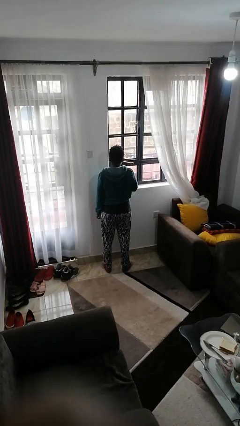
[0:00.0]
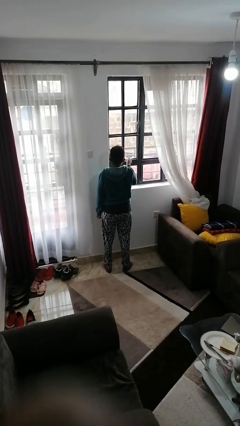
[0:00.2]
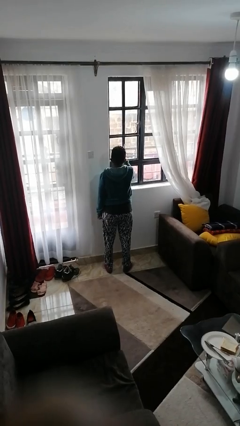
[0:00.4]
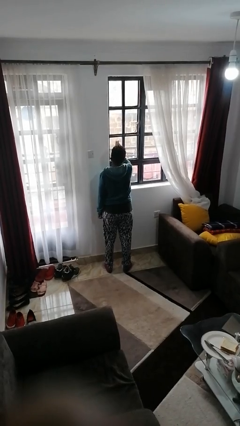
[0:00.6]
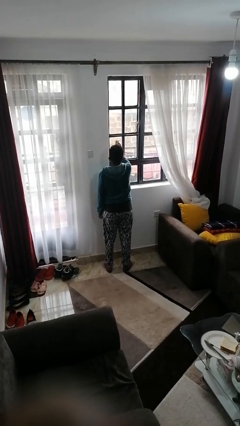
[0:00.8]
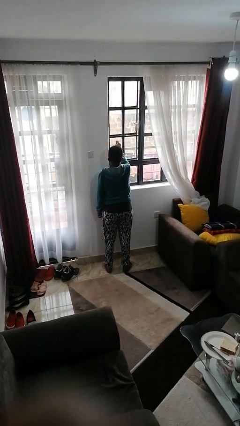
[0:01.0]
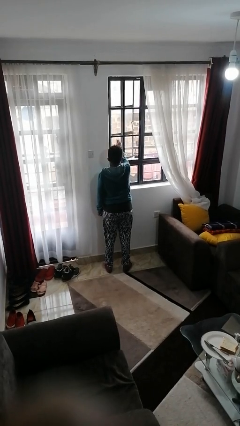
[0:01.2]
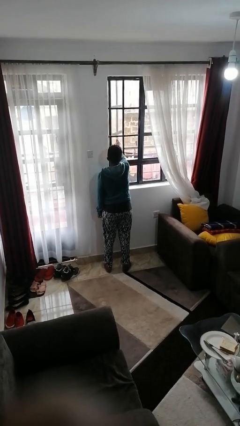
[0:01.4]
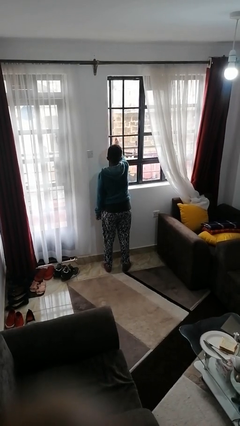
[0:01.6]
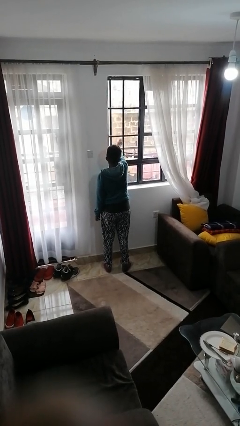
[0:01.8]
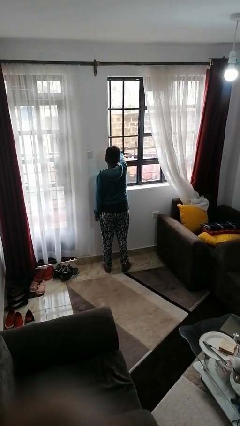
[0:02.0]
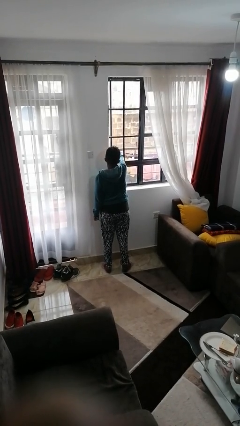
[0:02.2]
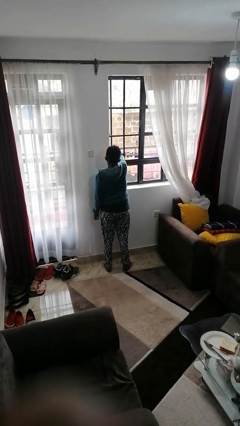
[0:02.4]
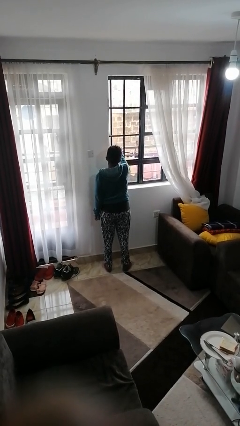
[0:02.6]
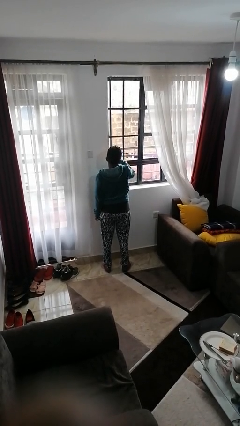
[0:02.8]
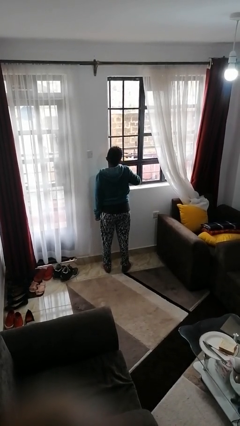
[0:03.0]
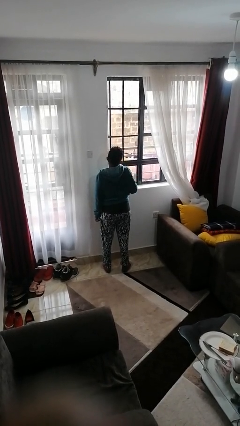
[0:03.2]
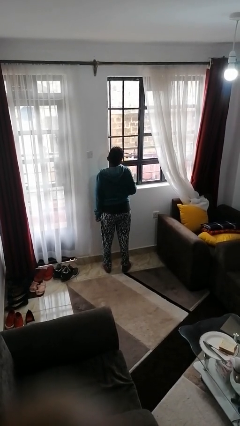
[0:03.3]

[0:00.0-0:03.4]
person opens home window

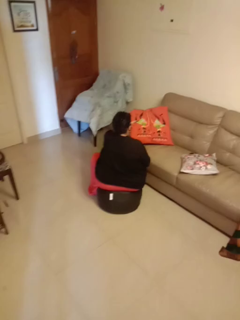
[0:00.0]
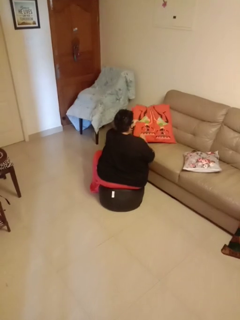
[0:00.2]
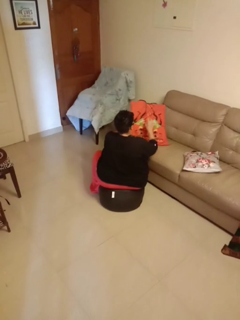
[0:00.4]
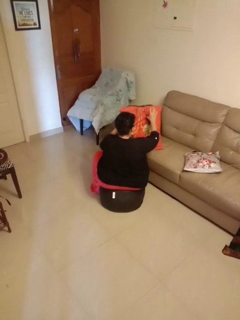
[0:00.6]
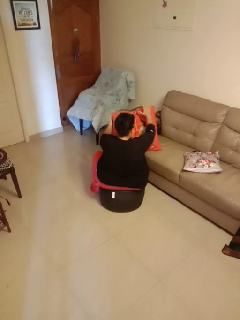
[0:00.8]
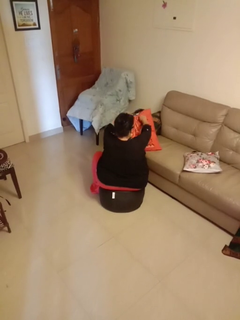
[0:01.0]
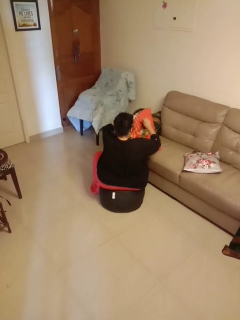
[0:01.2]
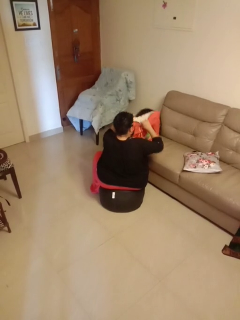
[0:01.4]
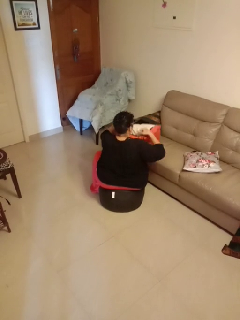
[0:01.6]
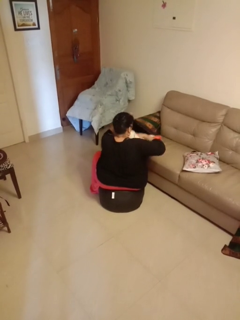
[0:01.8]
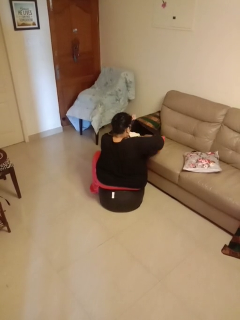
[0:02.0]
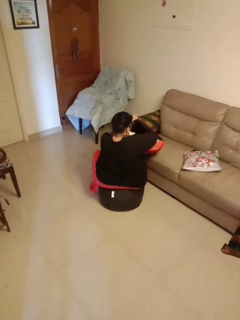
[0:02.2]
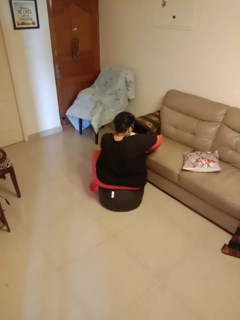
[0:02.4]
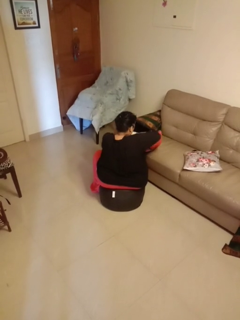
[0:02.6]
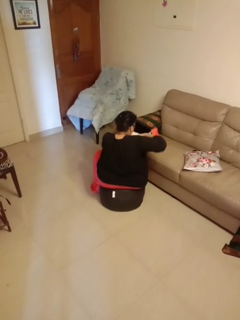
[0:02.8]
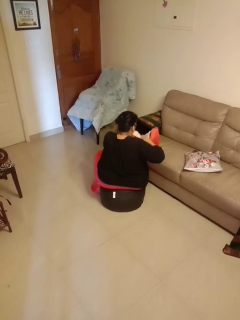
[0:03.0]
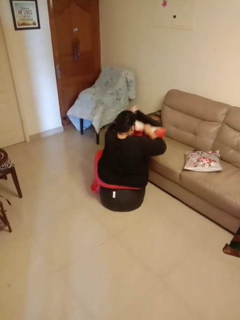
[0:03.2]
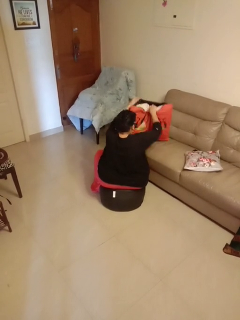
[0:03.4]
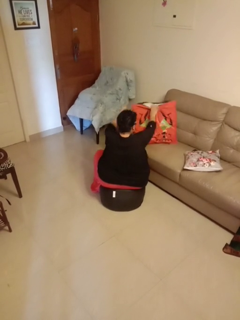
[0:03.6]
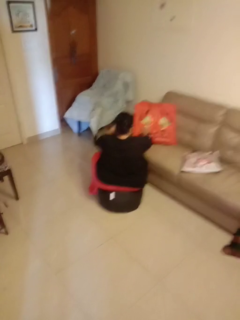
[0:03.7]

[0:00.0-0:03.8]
person searches in couch

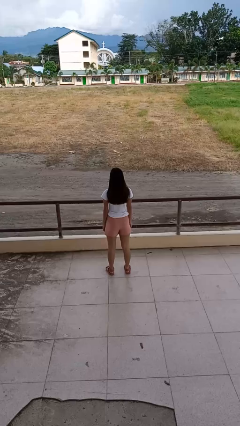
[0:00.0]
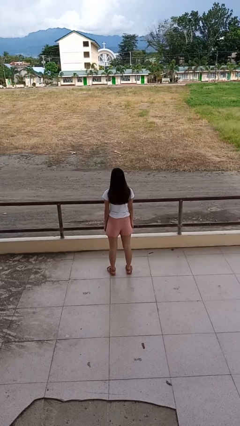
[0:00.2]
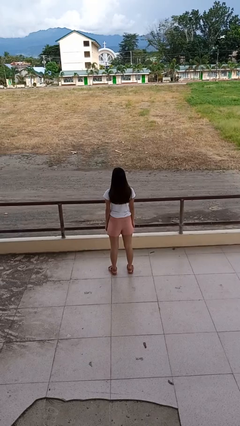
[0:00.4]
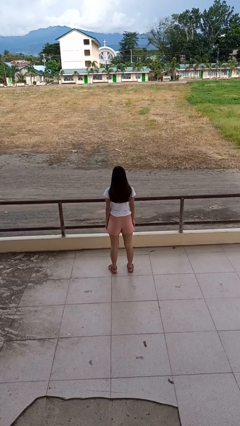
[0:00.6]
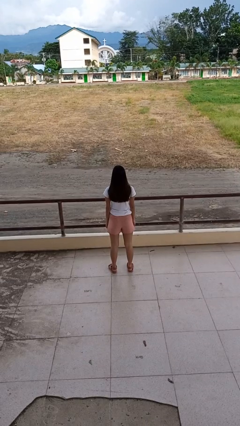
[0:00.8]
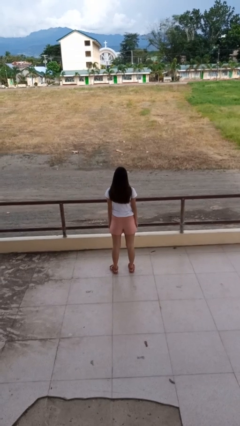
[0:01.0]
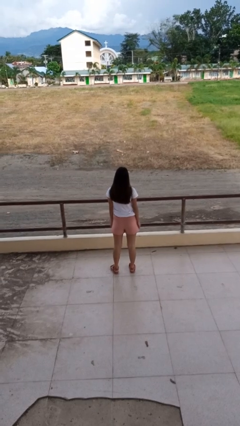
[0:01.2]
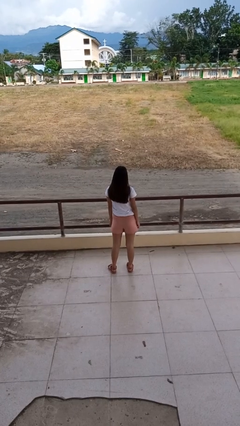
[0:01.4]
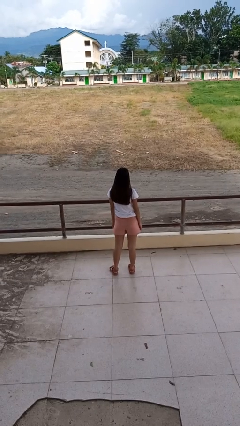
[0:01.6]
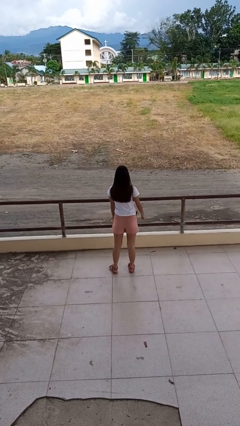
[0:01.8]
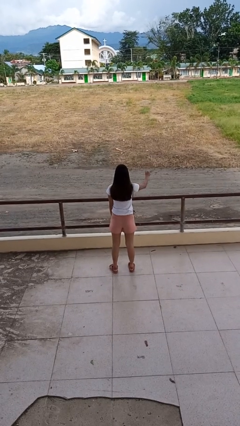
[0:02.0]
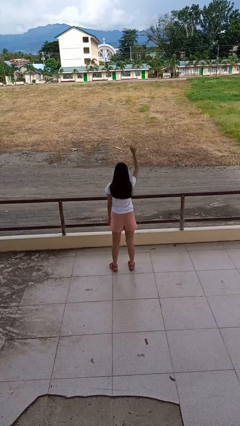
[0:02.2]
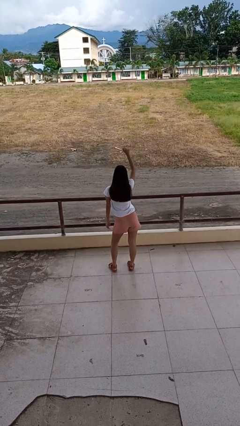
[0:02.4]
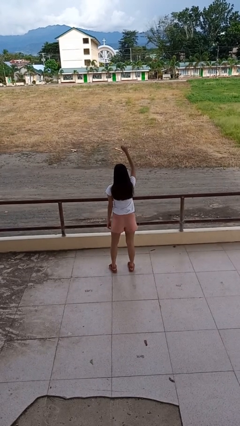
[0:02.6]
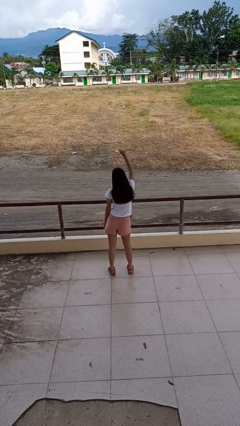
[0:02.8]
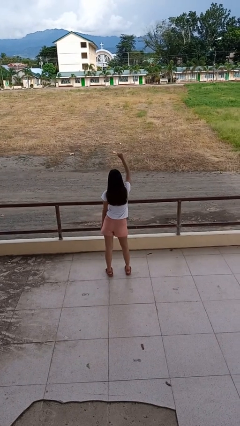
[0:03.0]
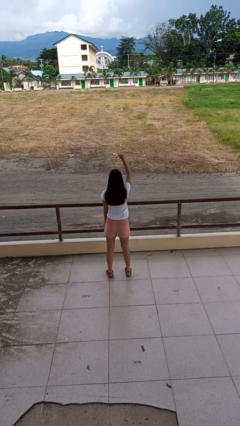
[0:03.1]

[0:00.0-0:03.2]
person dances in place

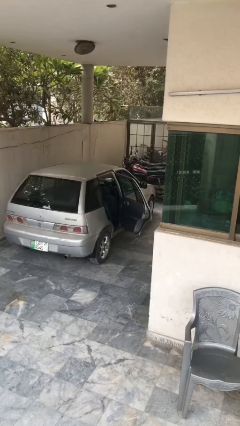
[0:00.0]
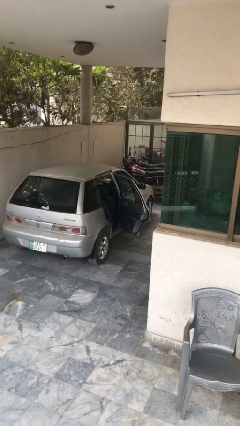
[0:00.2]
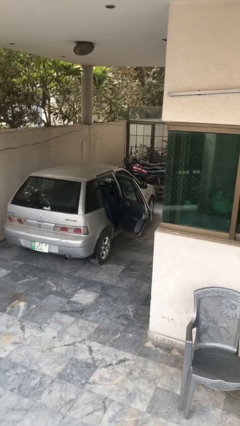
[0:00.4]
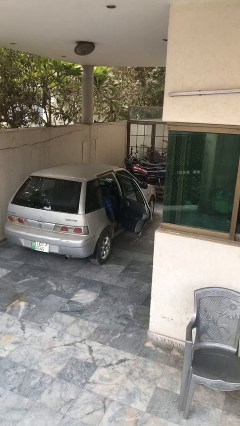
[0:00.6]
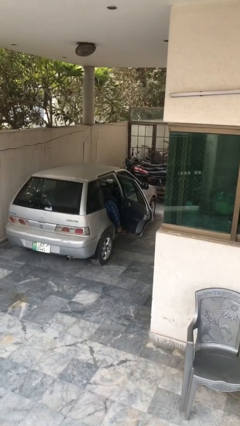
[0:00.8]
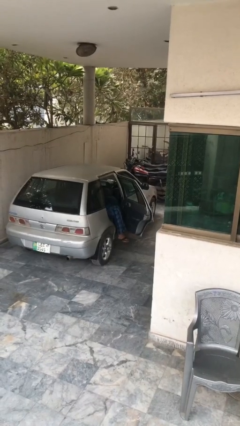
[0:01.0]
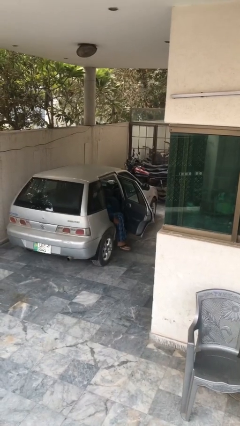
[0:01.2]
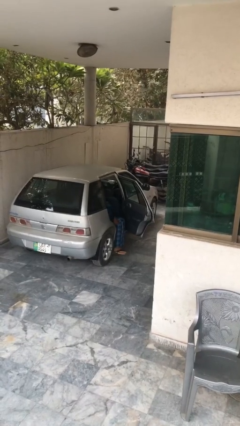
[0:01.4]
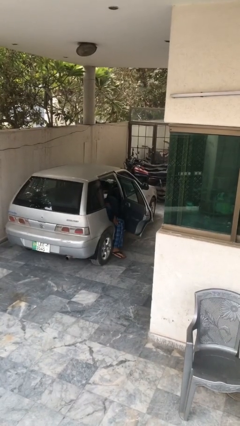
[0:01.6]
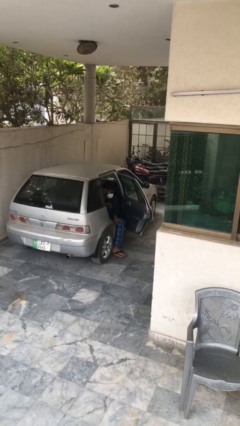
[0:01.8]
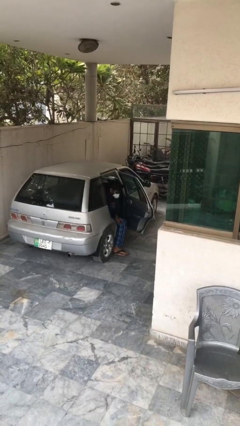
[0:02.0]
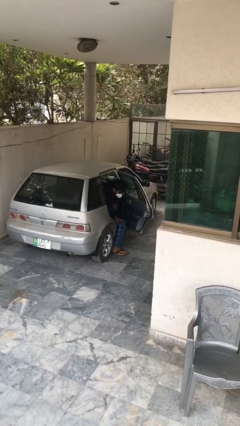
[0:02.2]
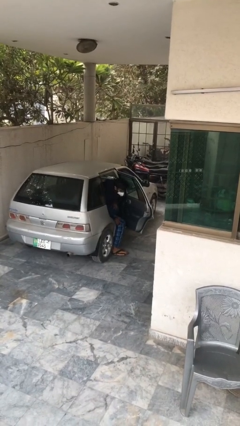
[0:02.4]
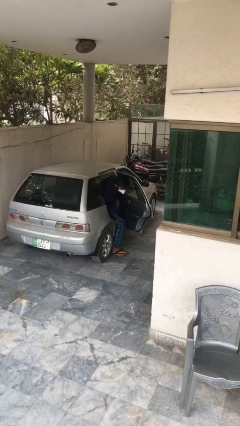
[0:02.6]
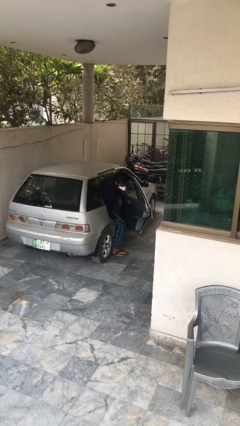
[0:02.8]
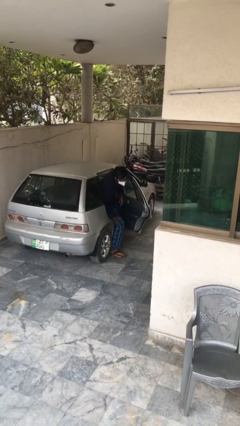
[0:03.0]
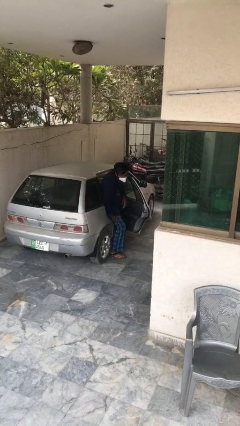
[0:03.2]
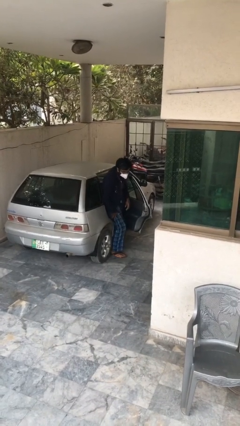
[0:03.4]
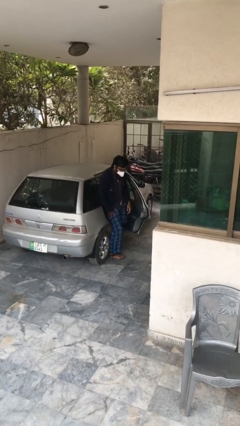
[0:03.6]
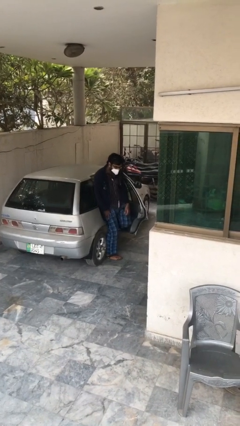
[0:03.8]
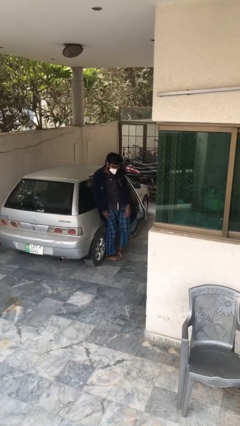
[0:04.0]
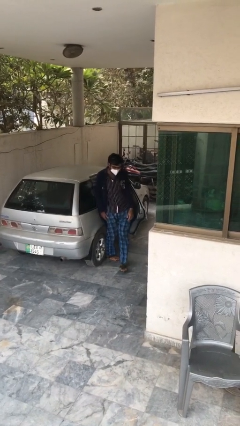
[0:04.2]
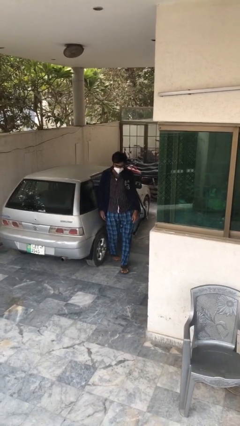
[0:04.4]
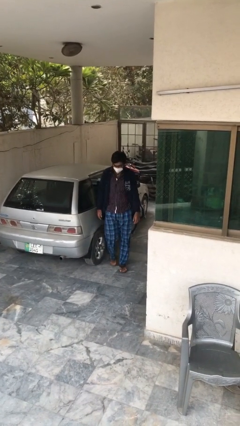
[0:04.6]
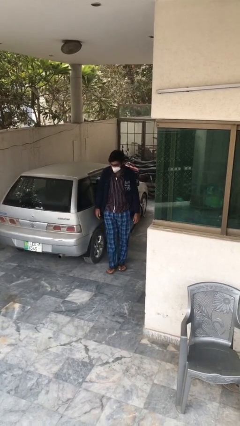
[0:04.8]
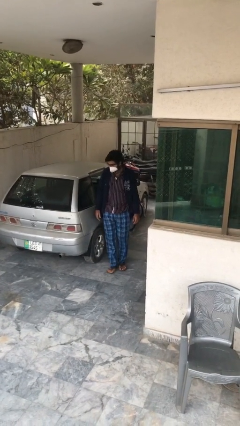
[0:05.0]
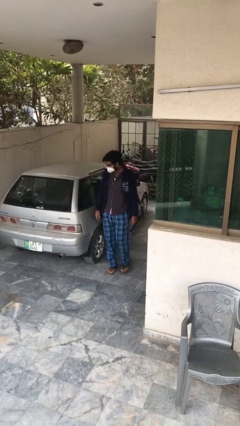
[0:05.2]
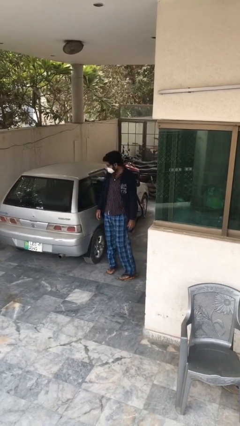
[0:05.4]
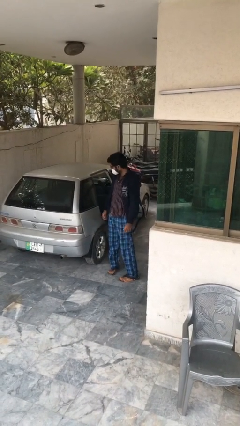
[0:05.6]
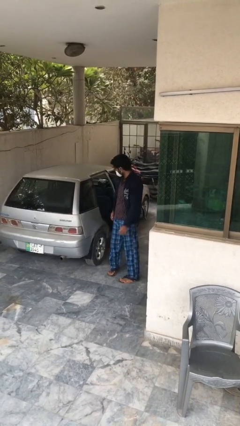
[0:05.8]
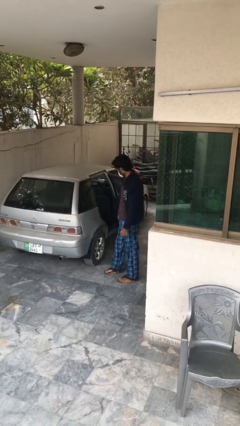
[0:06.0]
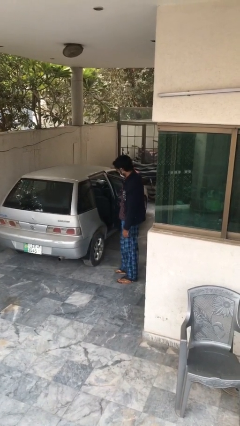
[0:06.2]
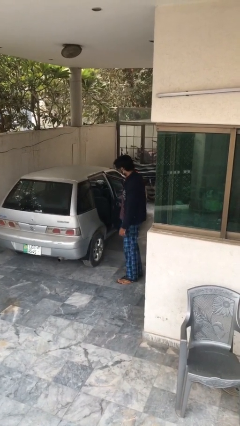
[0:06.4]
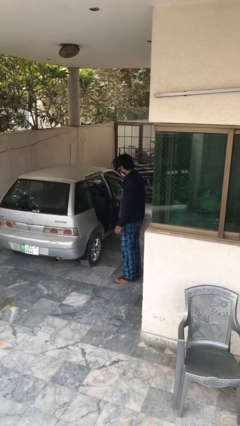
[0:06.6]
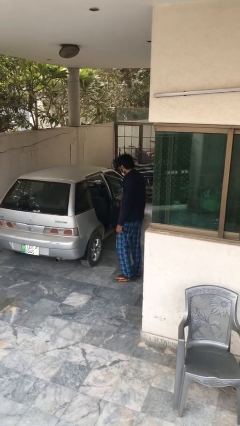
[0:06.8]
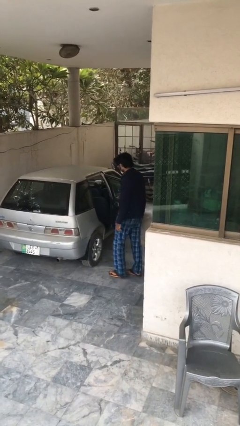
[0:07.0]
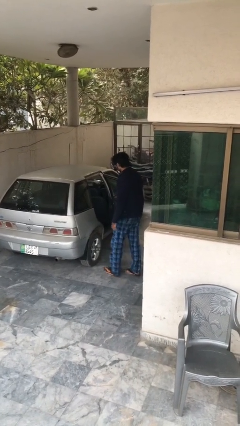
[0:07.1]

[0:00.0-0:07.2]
person exits car

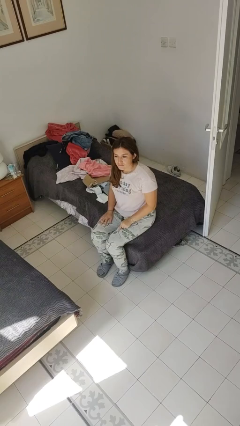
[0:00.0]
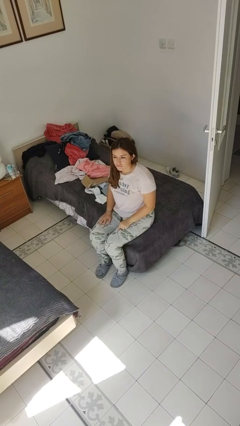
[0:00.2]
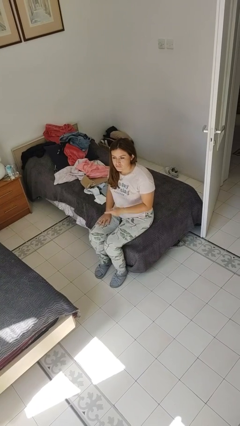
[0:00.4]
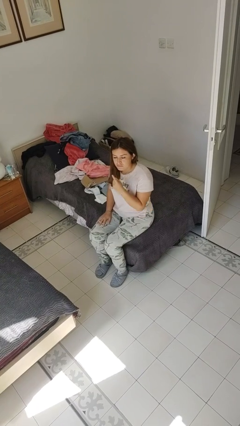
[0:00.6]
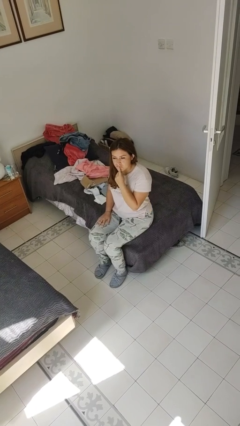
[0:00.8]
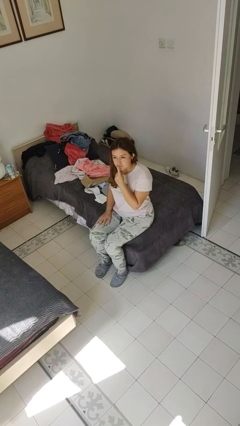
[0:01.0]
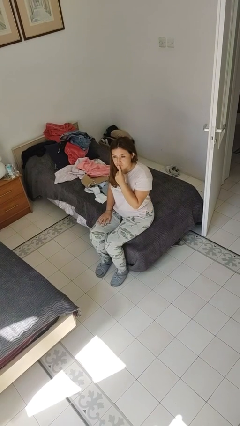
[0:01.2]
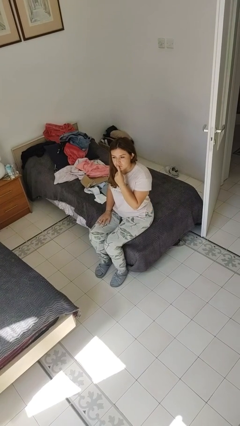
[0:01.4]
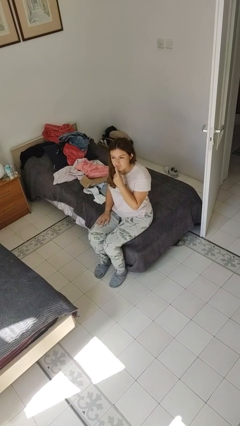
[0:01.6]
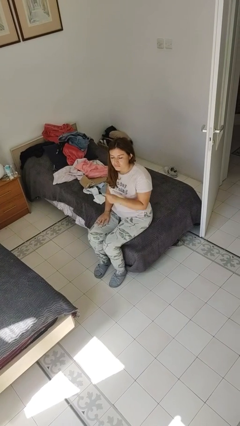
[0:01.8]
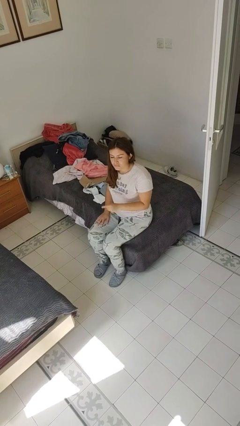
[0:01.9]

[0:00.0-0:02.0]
person gestures be quiet
